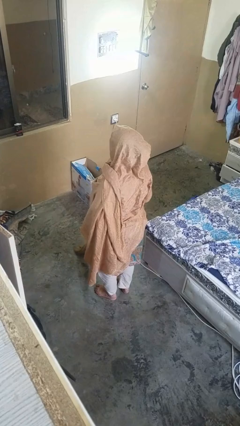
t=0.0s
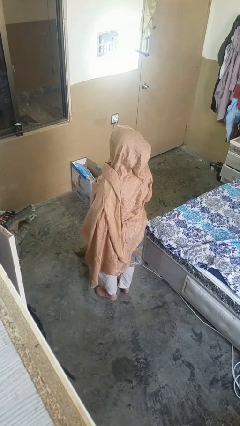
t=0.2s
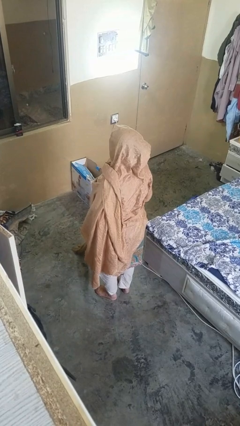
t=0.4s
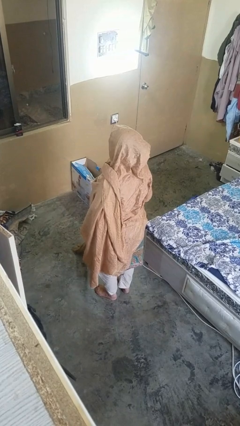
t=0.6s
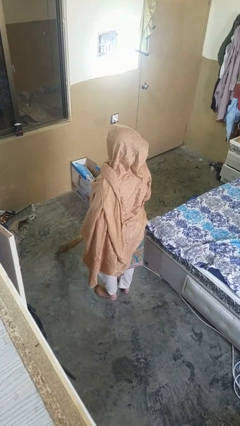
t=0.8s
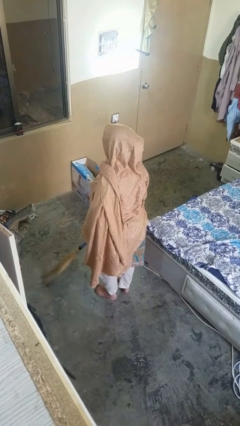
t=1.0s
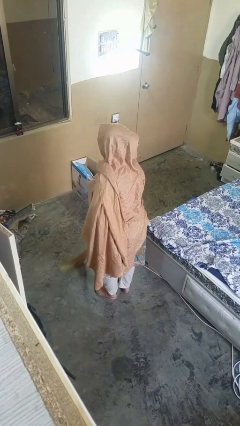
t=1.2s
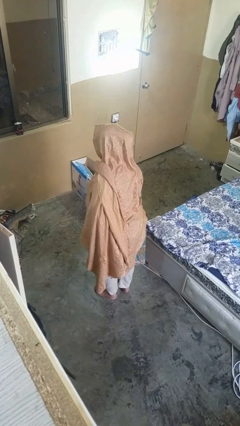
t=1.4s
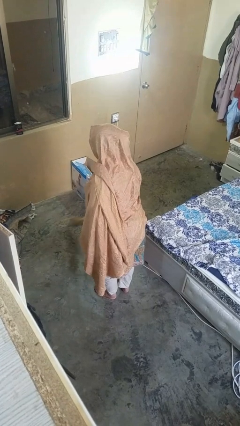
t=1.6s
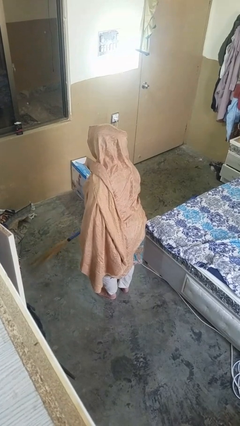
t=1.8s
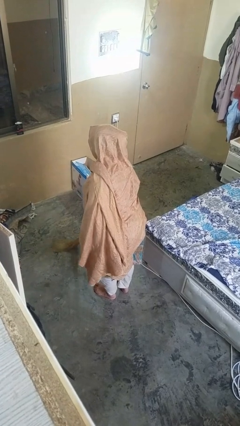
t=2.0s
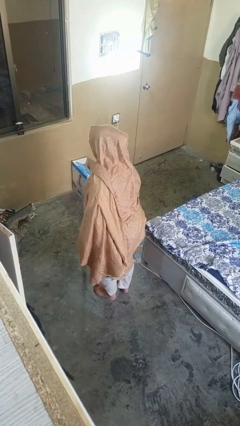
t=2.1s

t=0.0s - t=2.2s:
person sweeps floor

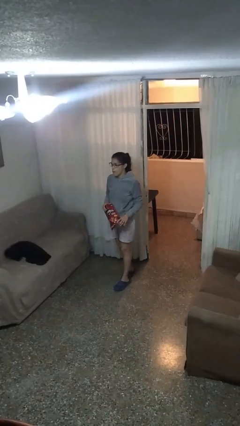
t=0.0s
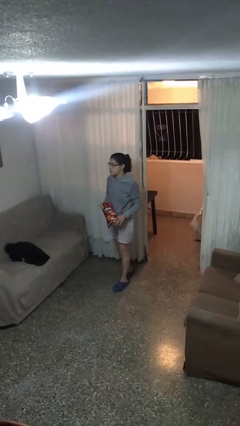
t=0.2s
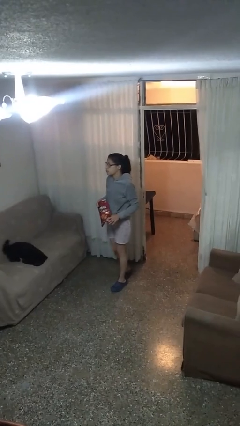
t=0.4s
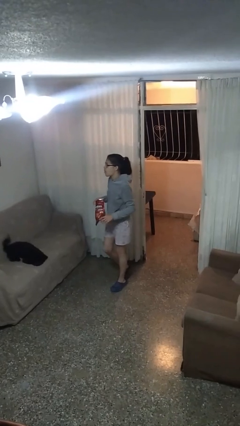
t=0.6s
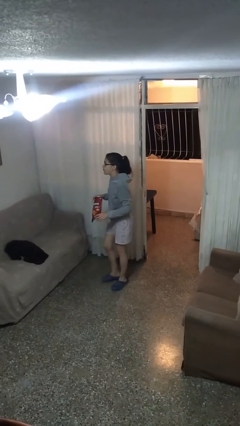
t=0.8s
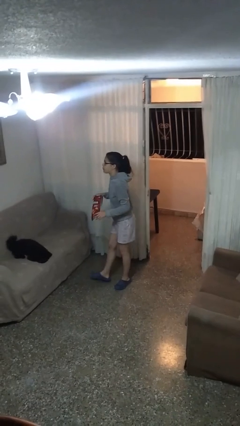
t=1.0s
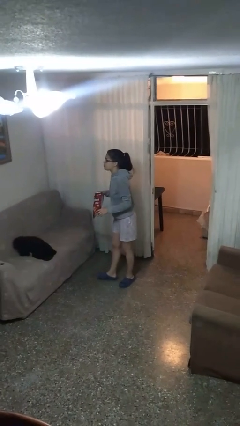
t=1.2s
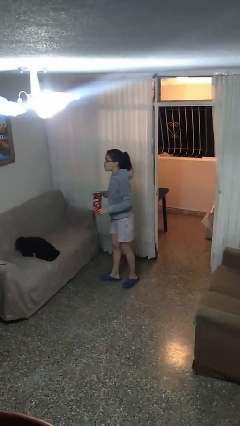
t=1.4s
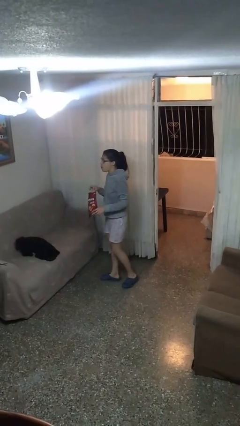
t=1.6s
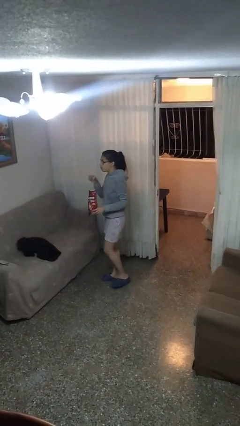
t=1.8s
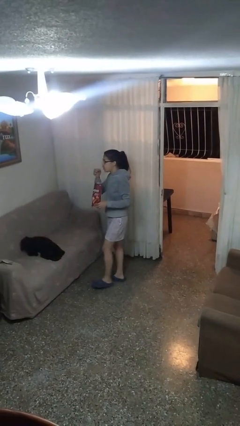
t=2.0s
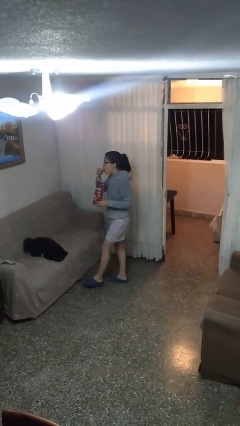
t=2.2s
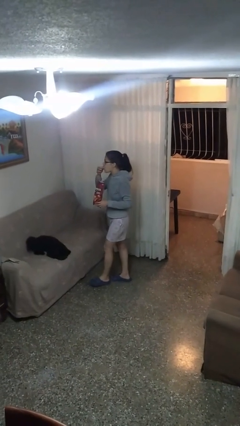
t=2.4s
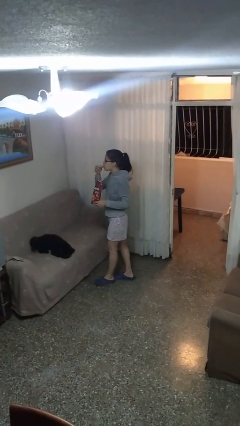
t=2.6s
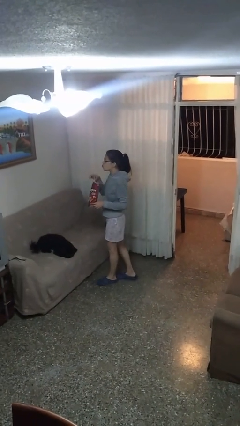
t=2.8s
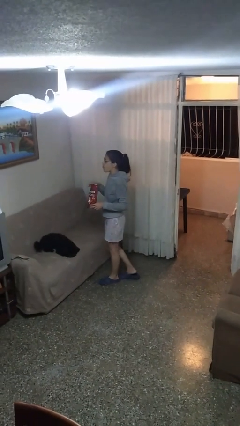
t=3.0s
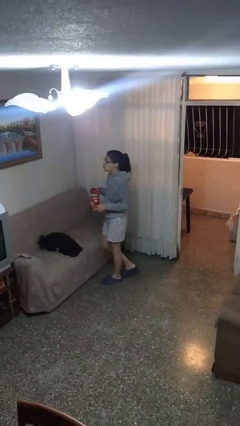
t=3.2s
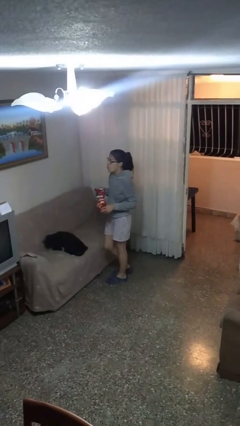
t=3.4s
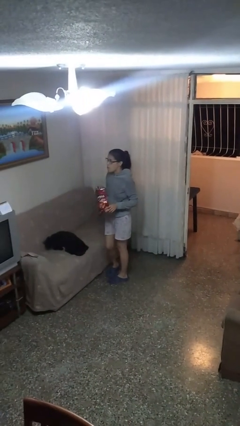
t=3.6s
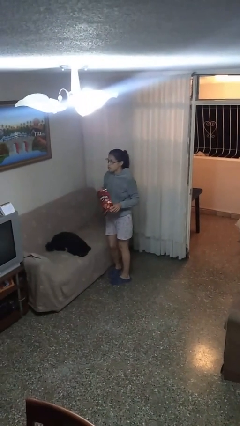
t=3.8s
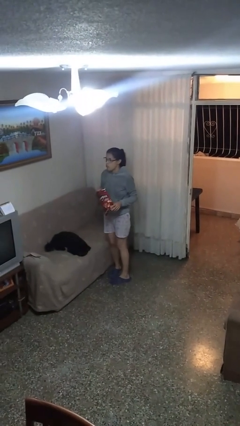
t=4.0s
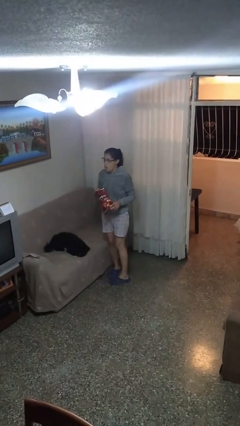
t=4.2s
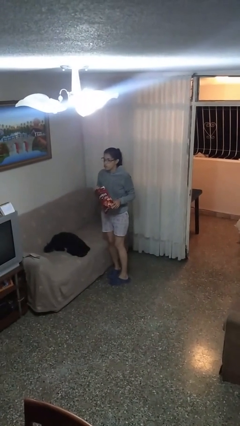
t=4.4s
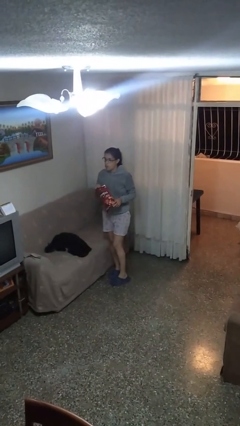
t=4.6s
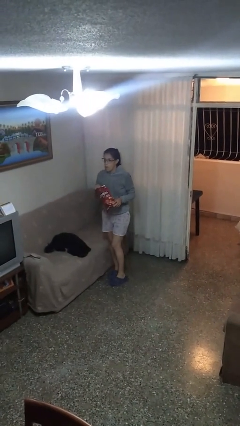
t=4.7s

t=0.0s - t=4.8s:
person eats snack from bag

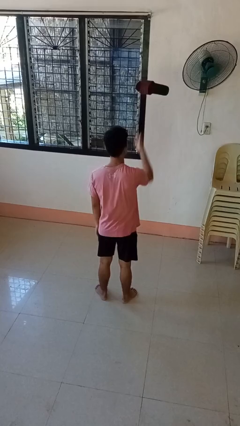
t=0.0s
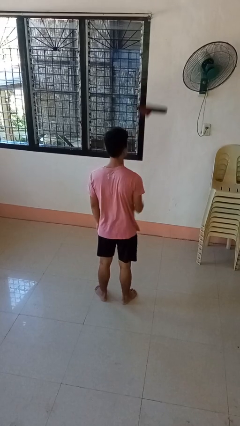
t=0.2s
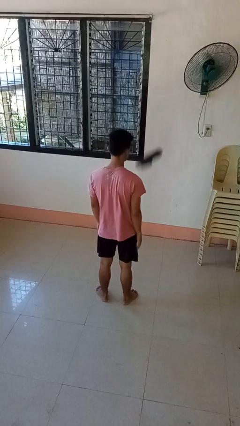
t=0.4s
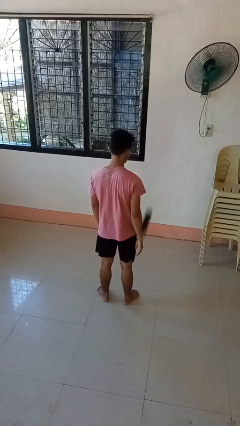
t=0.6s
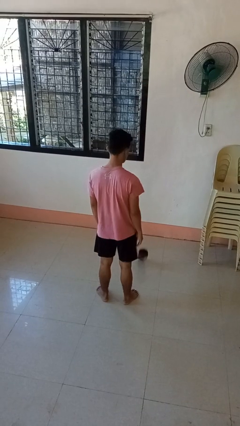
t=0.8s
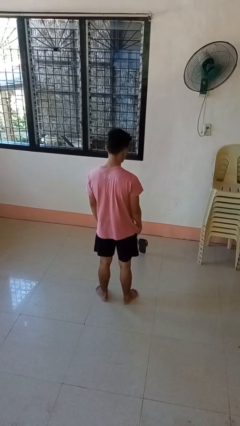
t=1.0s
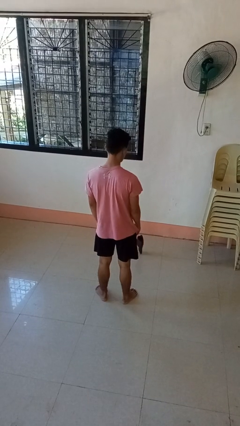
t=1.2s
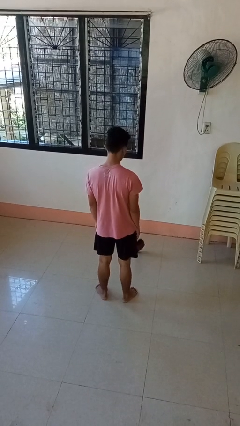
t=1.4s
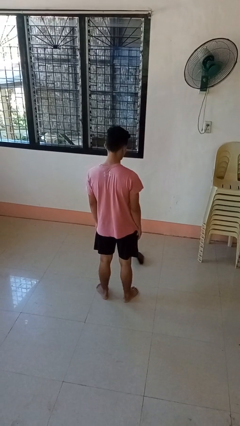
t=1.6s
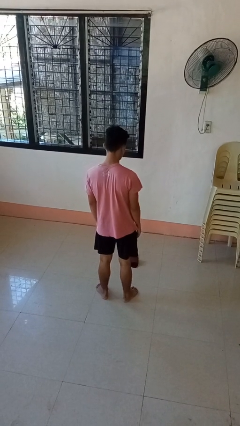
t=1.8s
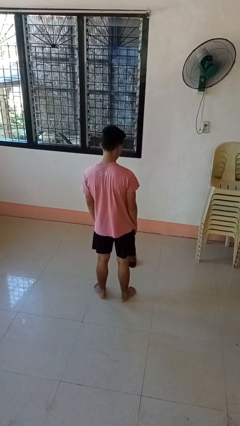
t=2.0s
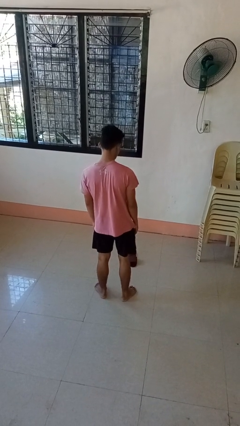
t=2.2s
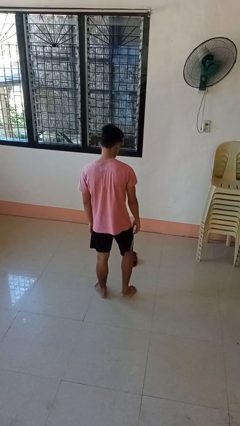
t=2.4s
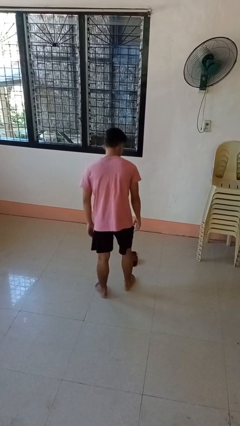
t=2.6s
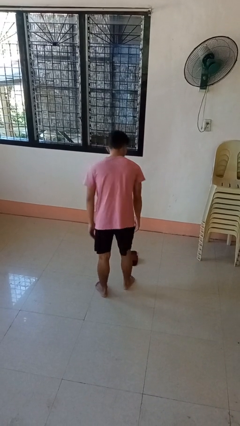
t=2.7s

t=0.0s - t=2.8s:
person throws object into air

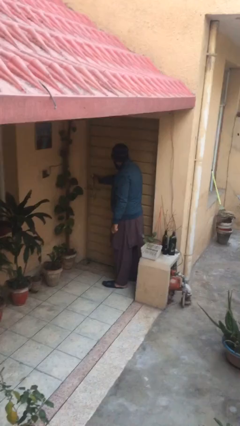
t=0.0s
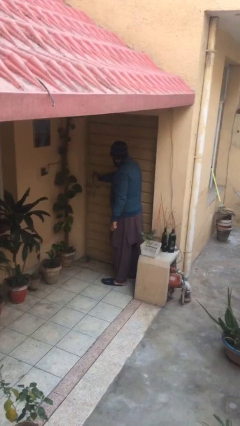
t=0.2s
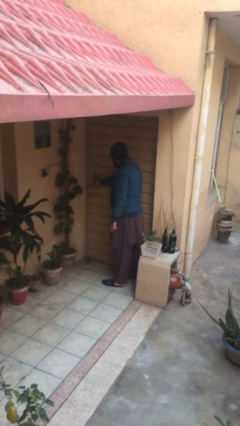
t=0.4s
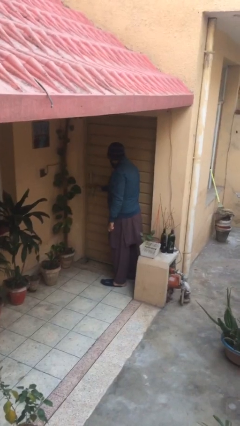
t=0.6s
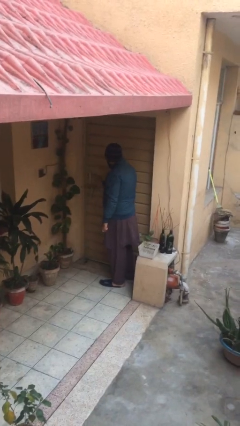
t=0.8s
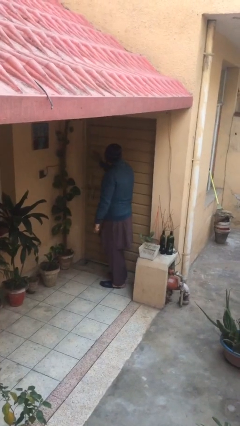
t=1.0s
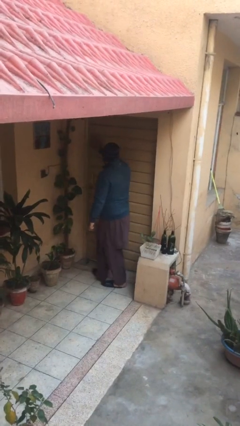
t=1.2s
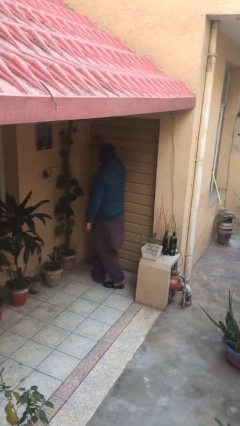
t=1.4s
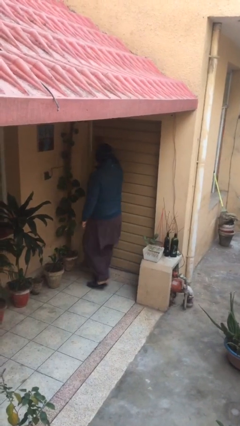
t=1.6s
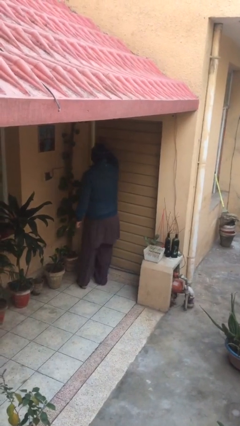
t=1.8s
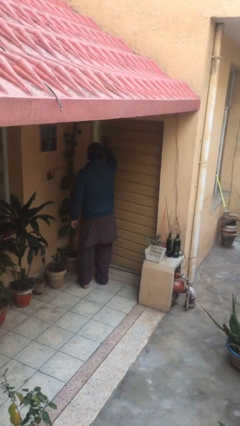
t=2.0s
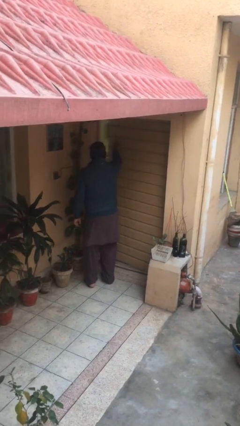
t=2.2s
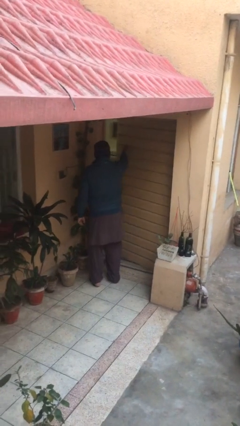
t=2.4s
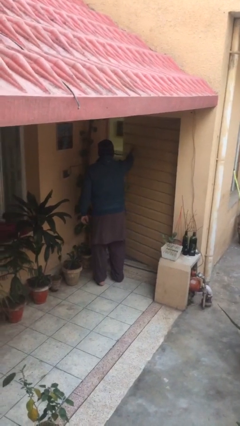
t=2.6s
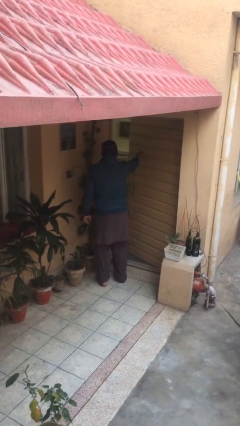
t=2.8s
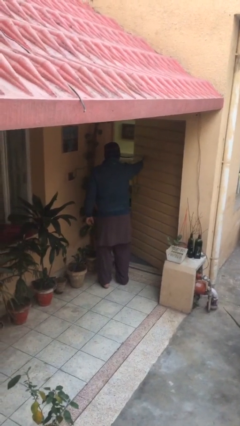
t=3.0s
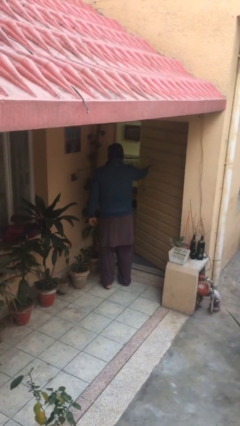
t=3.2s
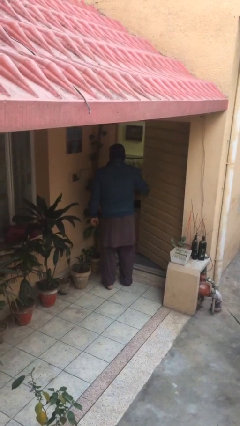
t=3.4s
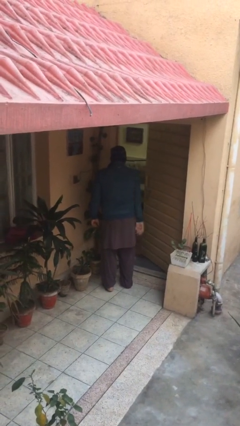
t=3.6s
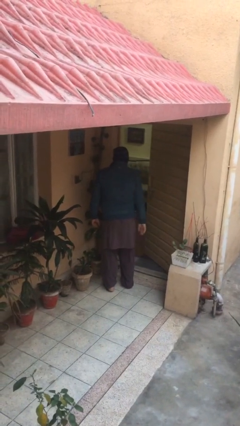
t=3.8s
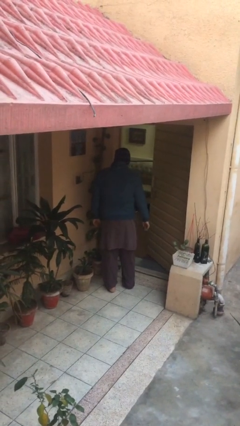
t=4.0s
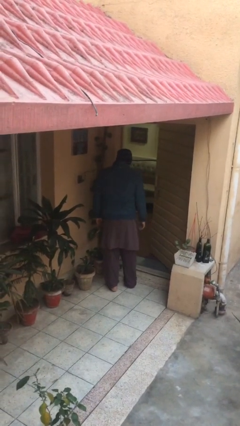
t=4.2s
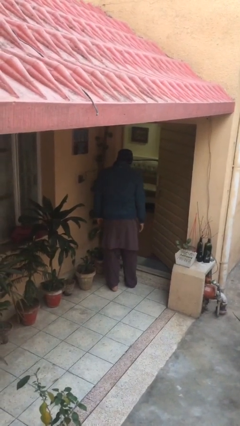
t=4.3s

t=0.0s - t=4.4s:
person opens facility door

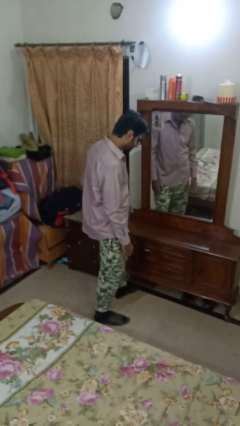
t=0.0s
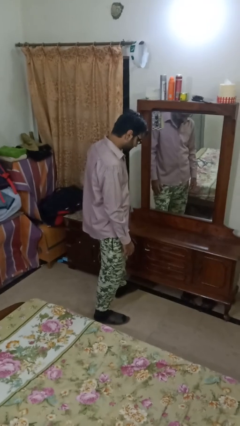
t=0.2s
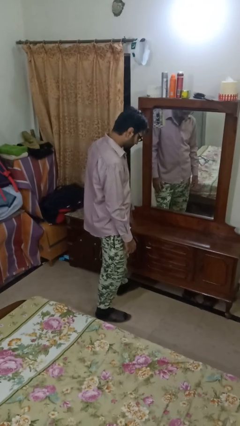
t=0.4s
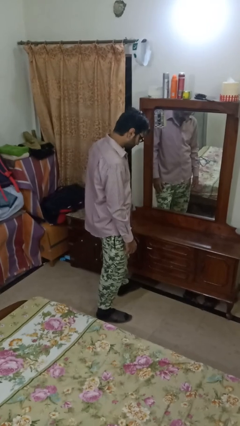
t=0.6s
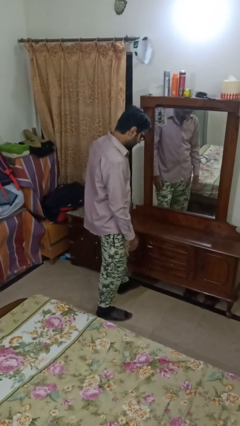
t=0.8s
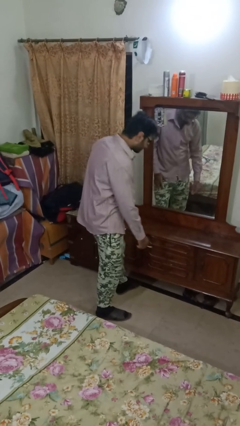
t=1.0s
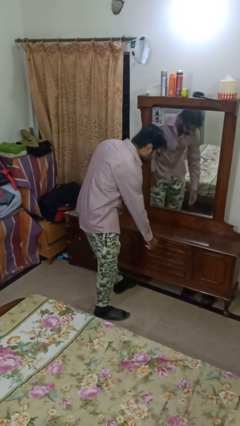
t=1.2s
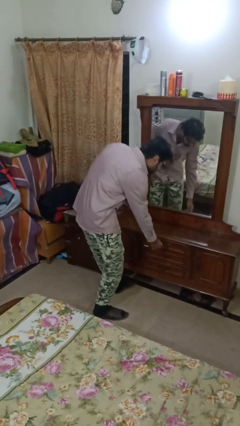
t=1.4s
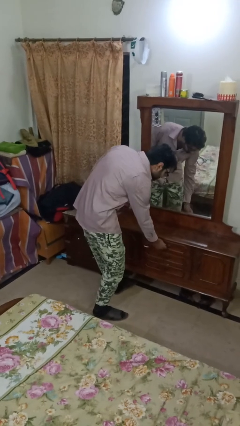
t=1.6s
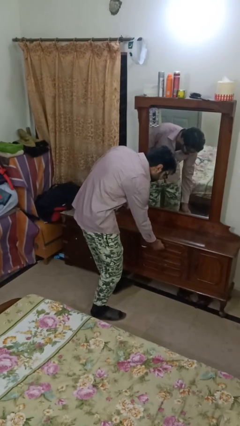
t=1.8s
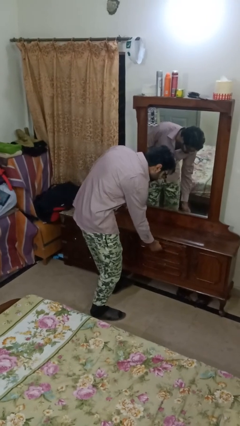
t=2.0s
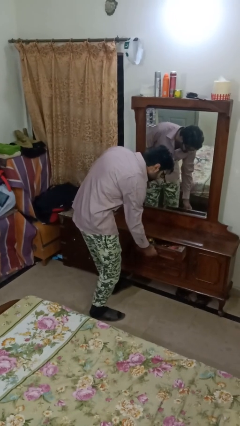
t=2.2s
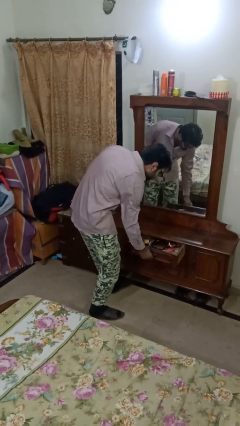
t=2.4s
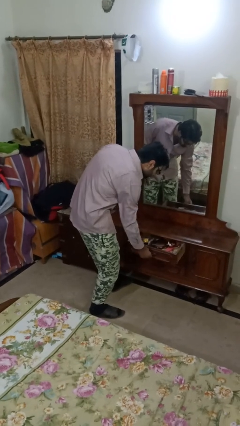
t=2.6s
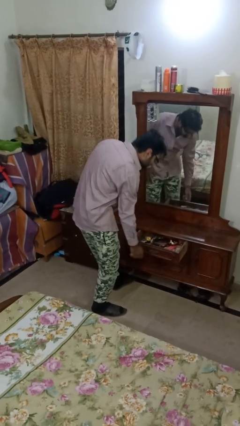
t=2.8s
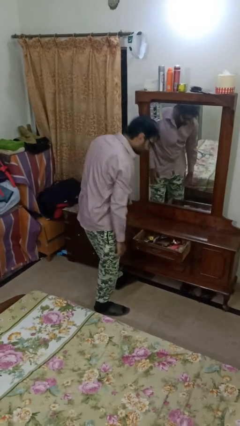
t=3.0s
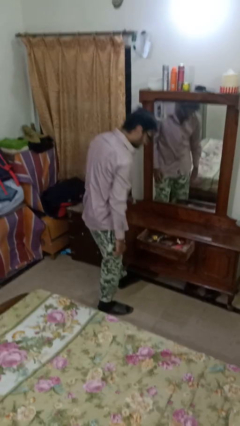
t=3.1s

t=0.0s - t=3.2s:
person opens dresser drawer

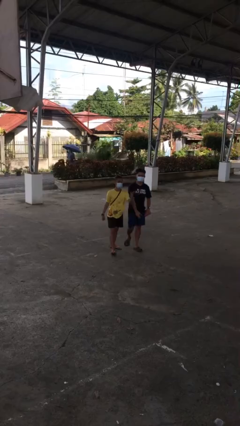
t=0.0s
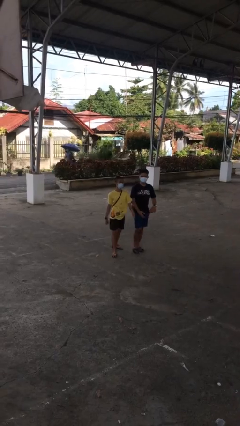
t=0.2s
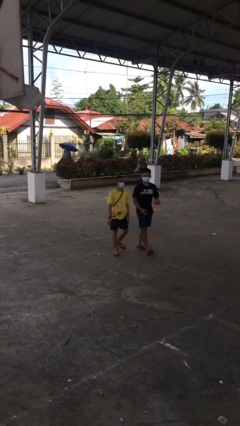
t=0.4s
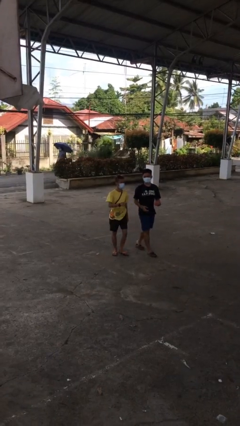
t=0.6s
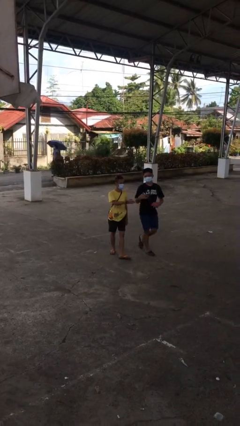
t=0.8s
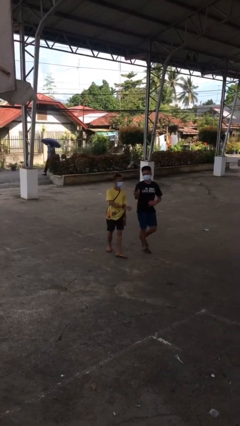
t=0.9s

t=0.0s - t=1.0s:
person talks to person
